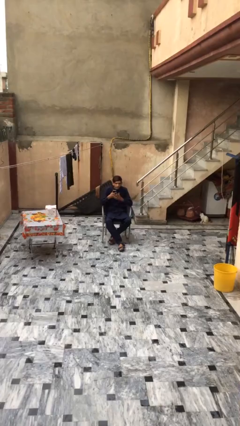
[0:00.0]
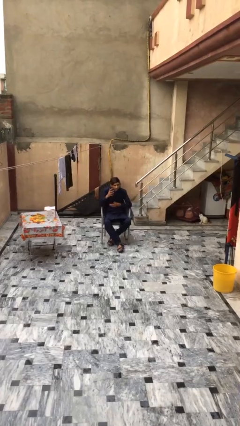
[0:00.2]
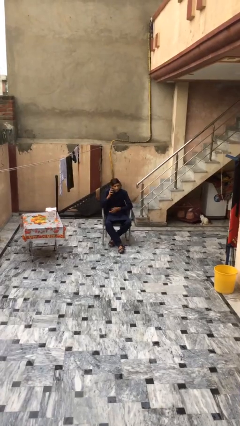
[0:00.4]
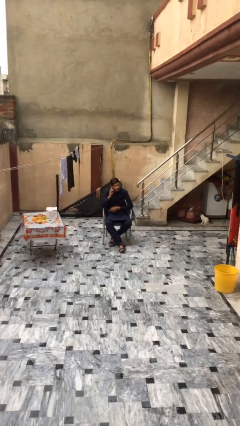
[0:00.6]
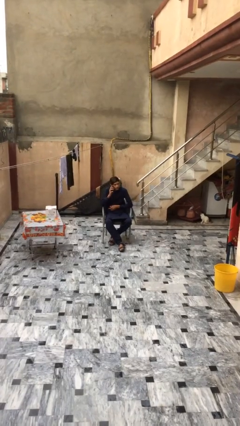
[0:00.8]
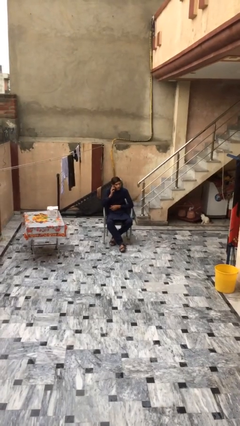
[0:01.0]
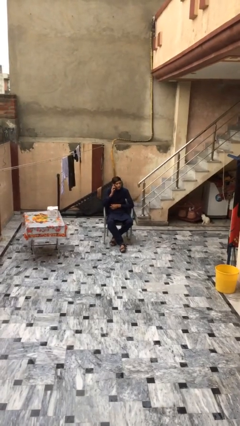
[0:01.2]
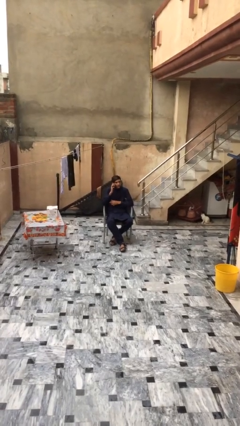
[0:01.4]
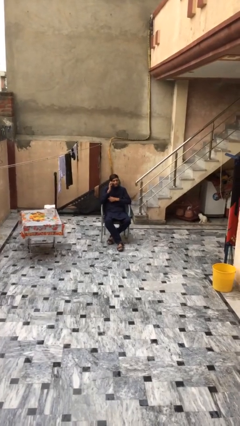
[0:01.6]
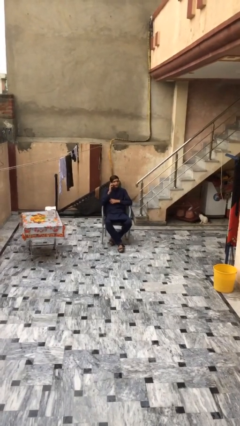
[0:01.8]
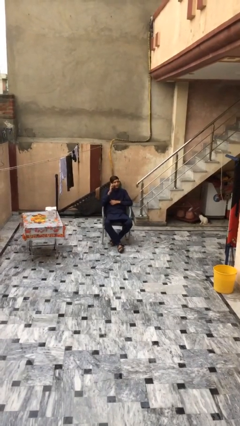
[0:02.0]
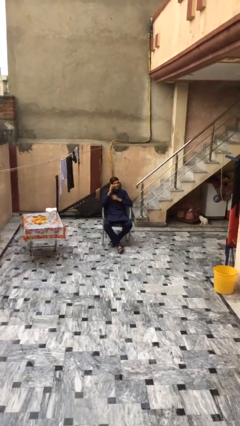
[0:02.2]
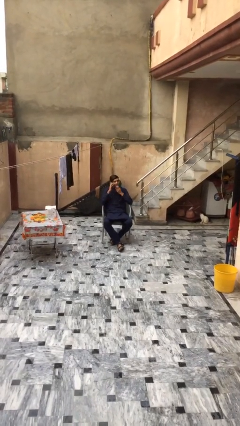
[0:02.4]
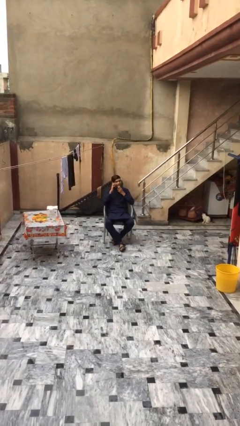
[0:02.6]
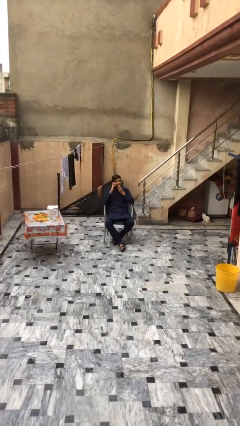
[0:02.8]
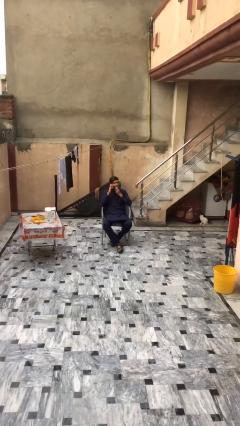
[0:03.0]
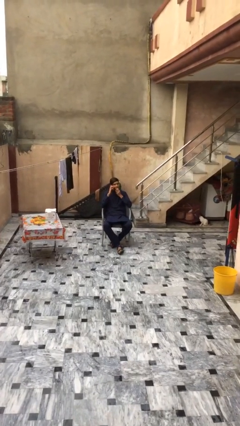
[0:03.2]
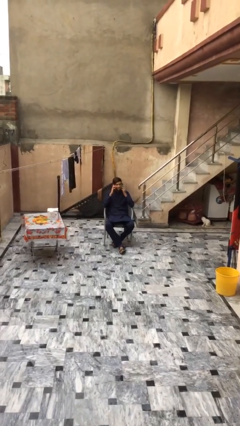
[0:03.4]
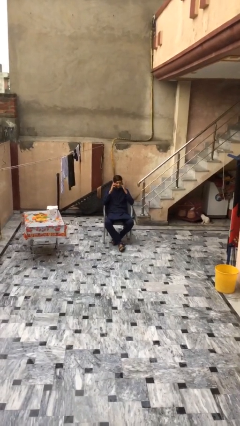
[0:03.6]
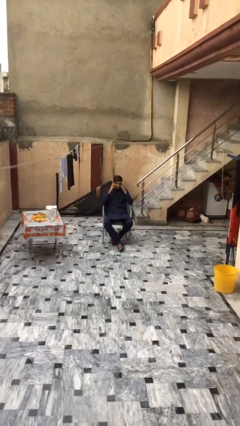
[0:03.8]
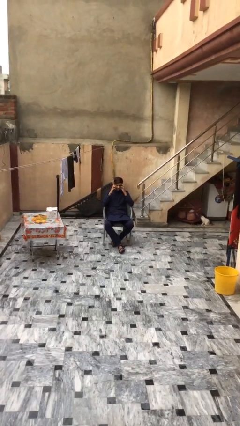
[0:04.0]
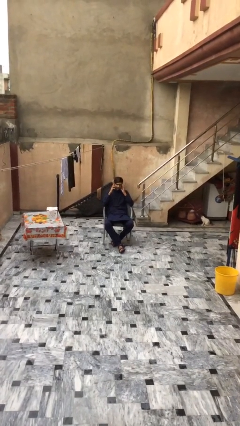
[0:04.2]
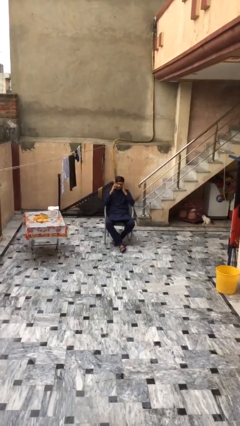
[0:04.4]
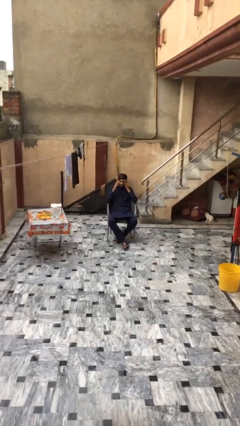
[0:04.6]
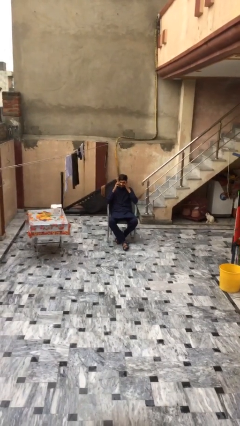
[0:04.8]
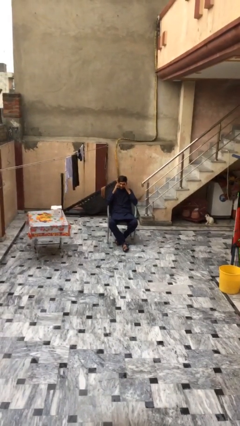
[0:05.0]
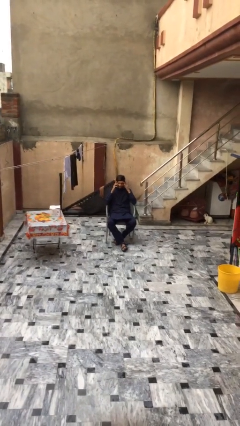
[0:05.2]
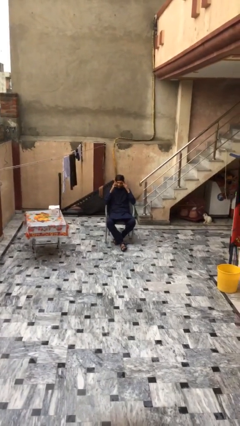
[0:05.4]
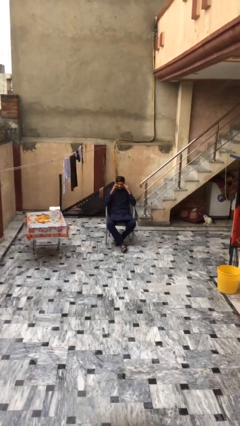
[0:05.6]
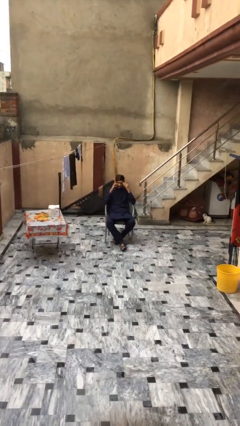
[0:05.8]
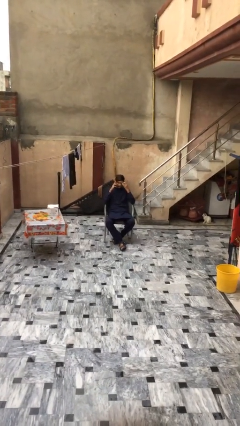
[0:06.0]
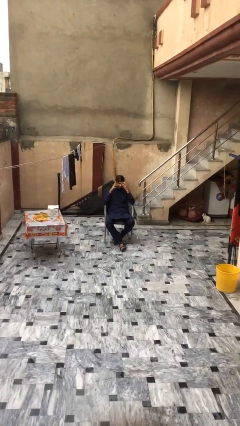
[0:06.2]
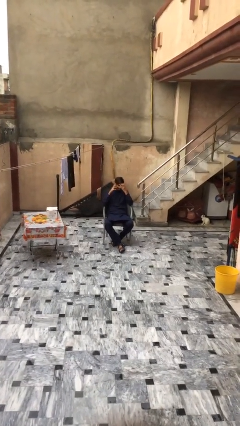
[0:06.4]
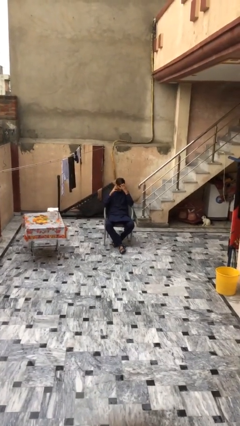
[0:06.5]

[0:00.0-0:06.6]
person talks on phone

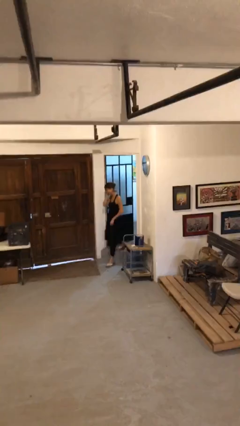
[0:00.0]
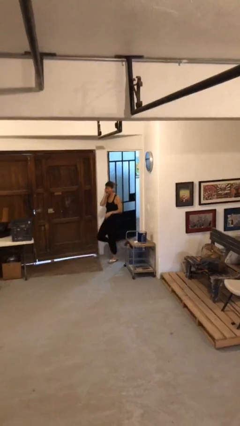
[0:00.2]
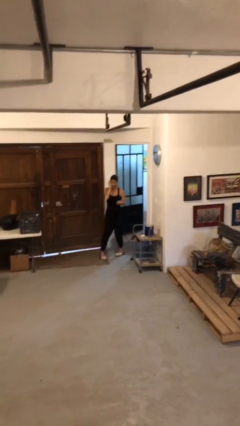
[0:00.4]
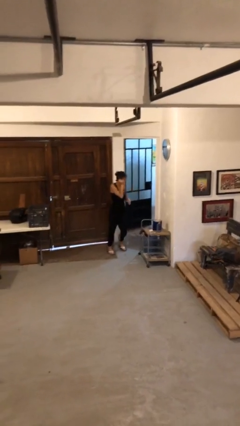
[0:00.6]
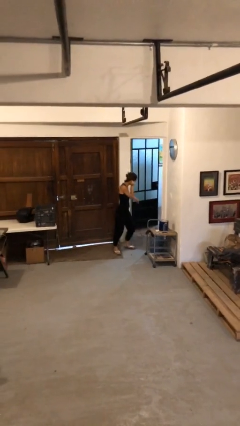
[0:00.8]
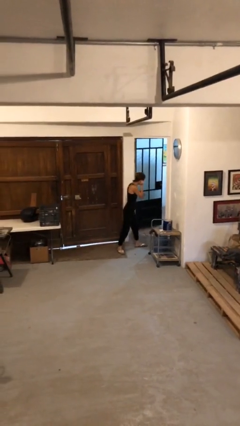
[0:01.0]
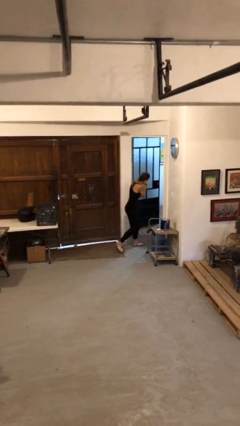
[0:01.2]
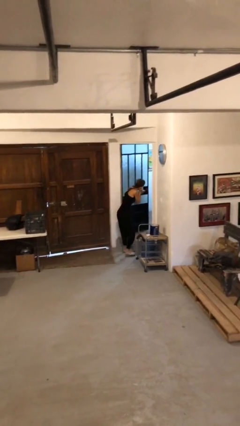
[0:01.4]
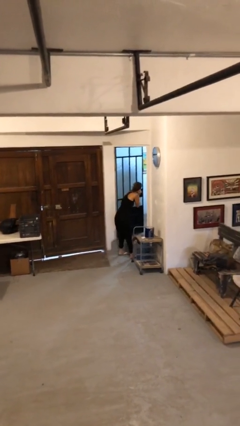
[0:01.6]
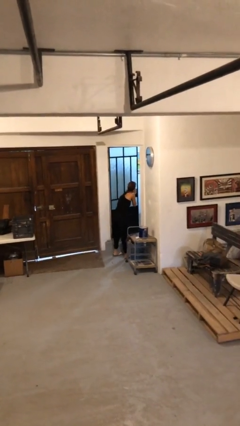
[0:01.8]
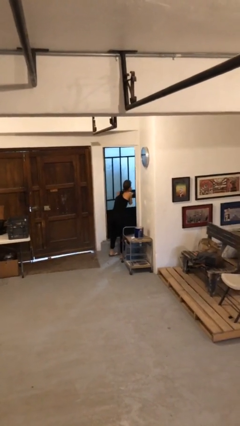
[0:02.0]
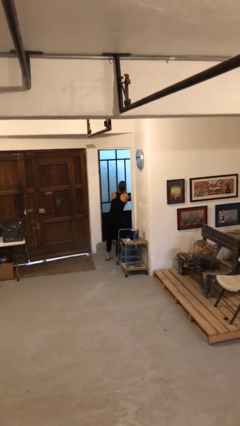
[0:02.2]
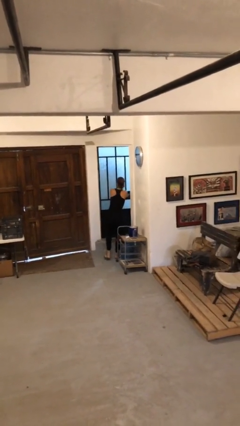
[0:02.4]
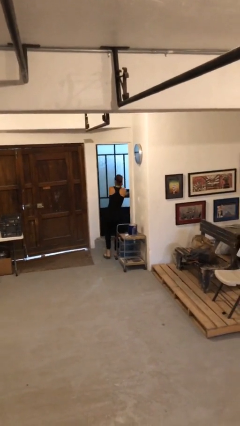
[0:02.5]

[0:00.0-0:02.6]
person enters scene through structure

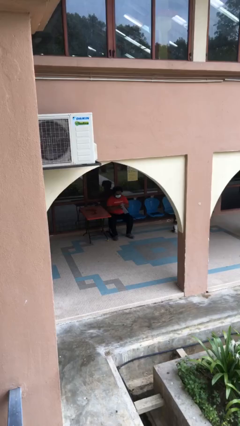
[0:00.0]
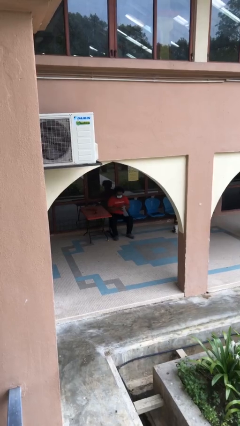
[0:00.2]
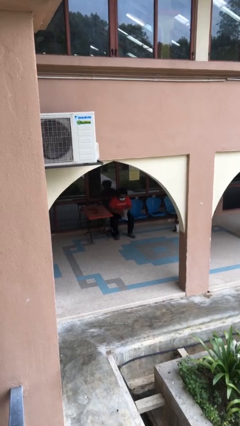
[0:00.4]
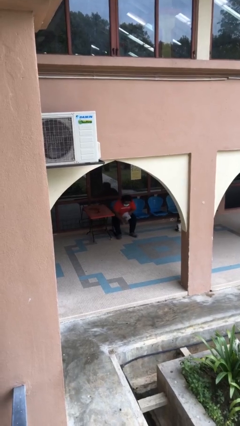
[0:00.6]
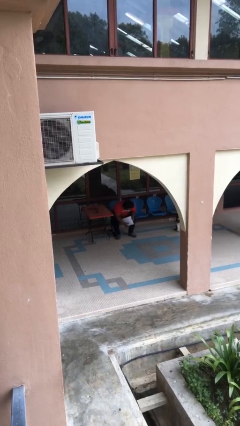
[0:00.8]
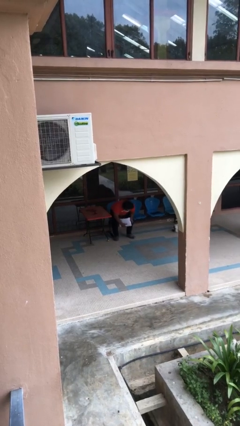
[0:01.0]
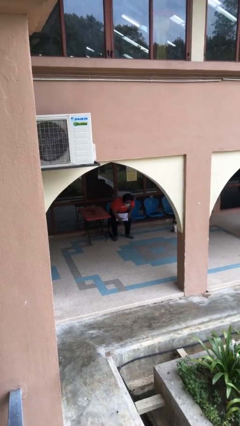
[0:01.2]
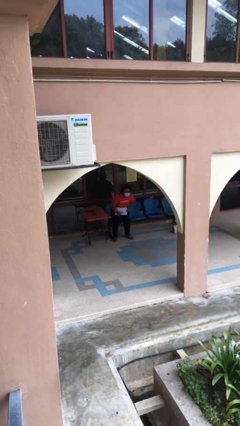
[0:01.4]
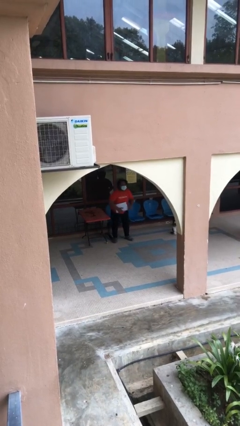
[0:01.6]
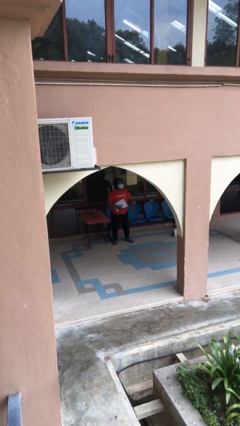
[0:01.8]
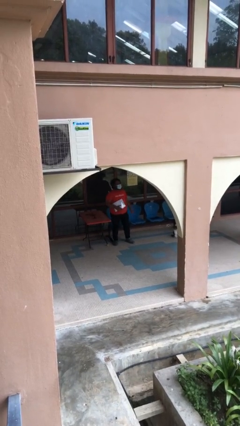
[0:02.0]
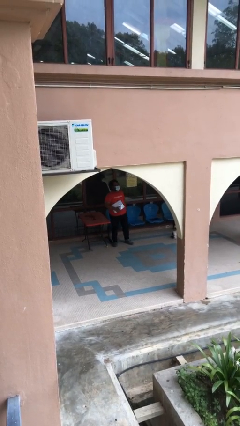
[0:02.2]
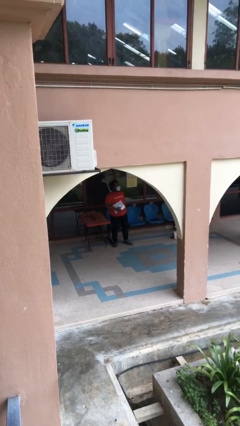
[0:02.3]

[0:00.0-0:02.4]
person stands up

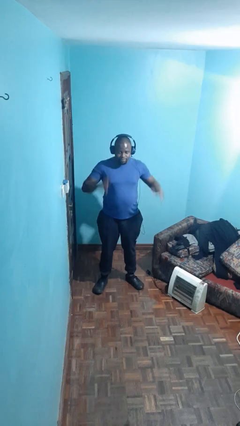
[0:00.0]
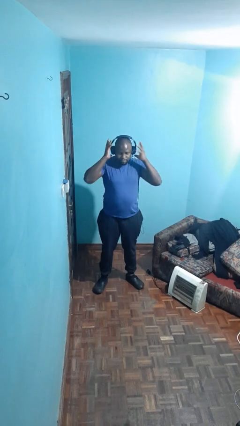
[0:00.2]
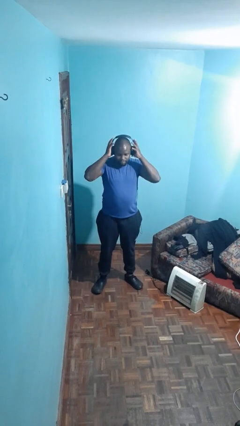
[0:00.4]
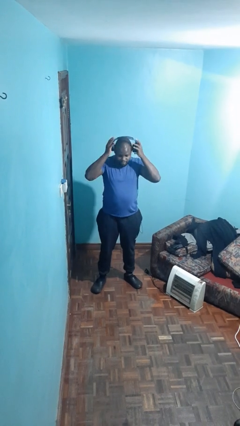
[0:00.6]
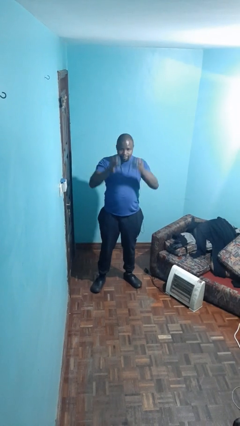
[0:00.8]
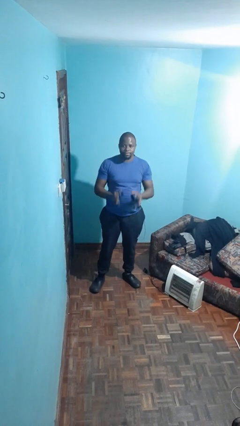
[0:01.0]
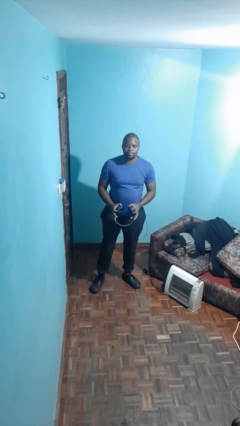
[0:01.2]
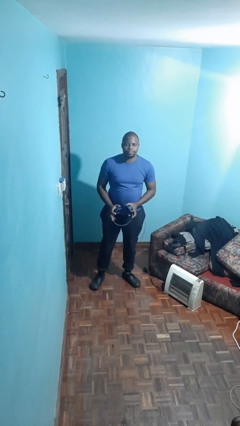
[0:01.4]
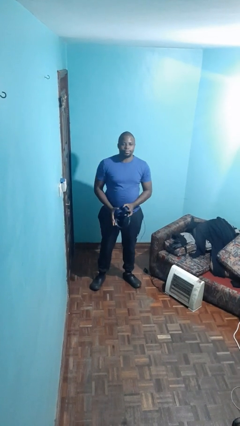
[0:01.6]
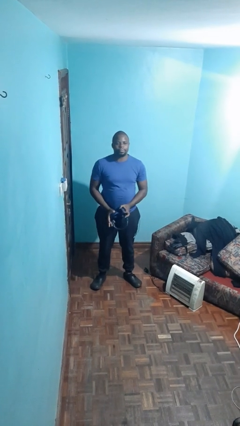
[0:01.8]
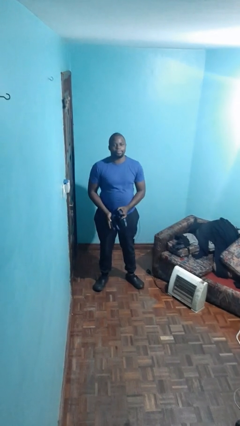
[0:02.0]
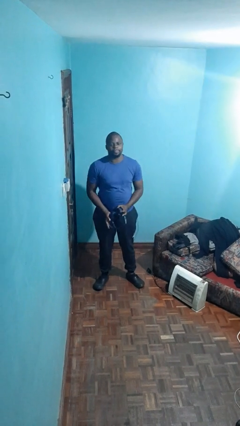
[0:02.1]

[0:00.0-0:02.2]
person takes off headphones

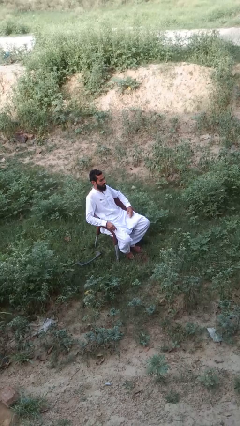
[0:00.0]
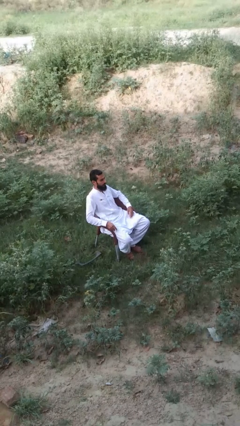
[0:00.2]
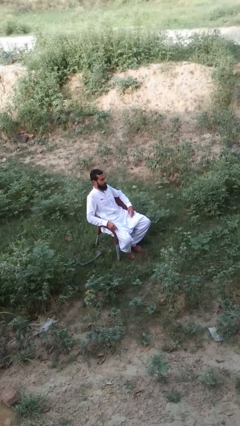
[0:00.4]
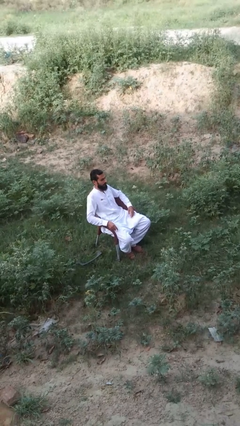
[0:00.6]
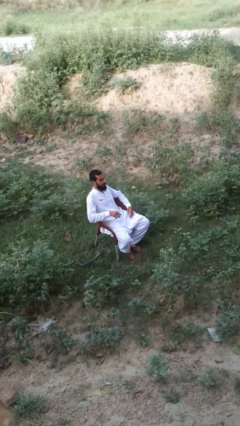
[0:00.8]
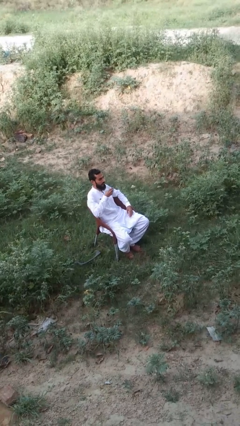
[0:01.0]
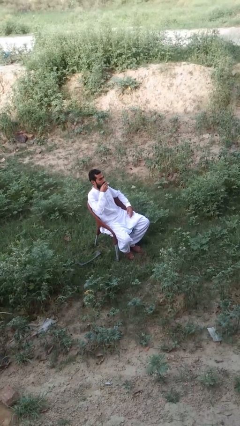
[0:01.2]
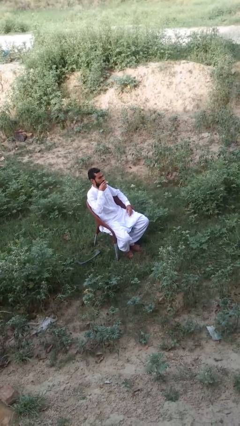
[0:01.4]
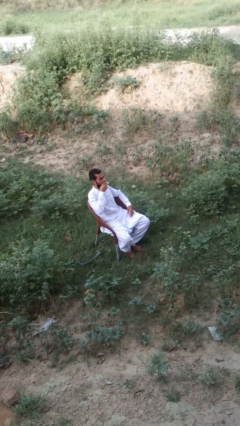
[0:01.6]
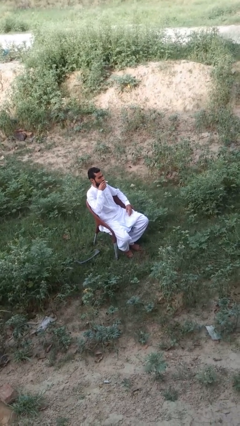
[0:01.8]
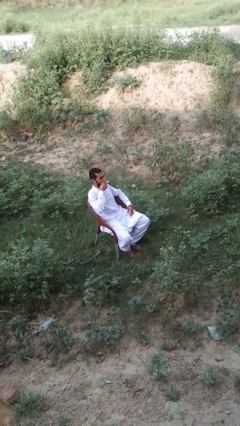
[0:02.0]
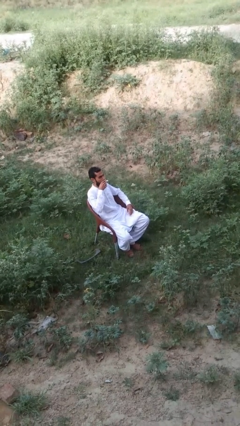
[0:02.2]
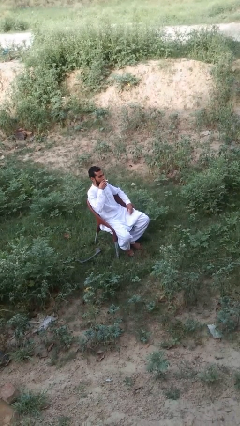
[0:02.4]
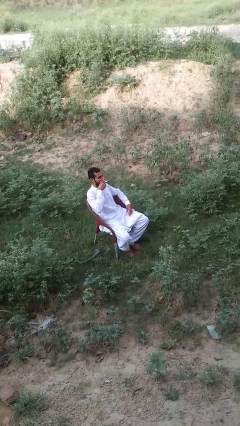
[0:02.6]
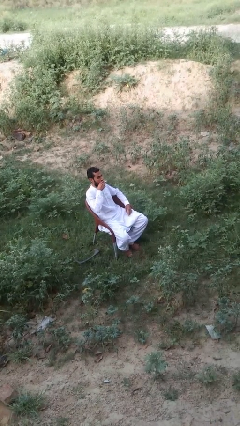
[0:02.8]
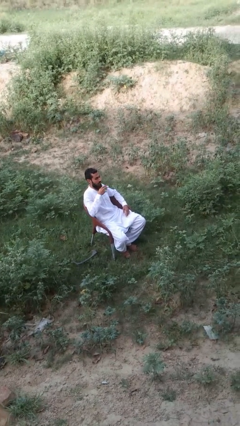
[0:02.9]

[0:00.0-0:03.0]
person vapes

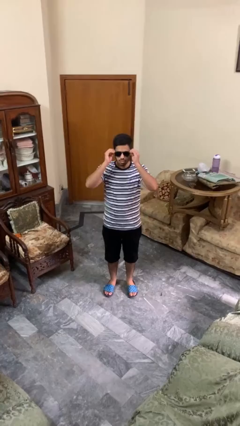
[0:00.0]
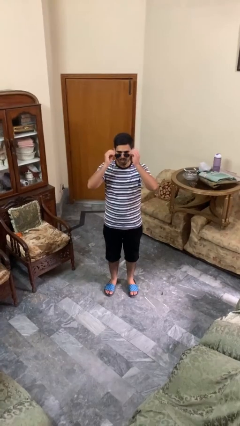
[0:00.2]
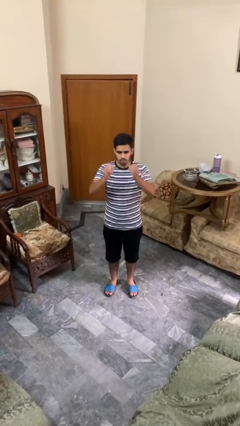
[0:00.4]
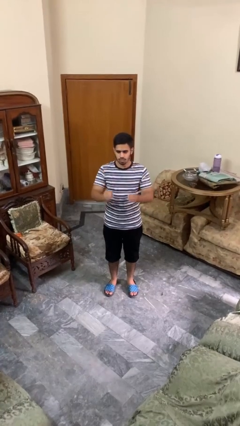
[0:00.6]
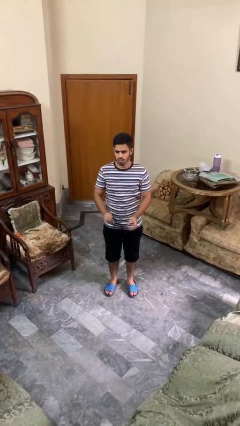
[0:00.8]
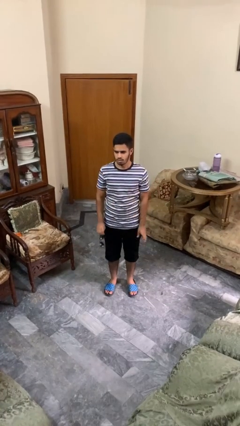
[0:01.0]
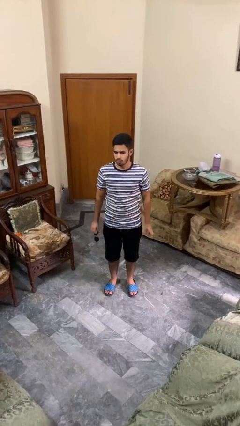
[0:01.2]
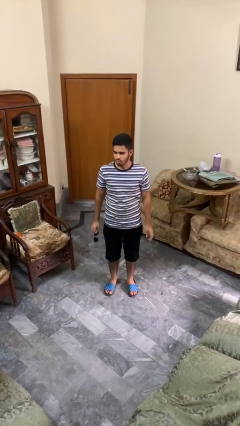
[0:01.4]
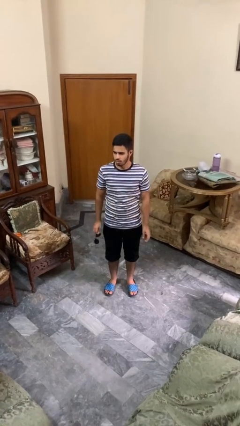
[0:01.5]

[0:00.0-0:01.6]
person takes off sunglasses
